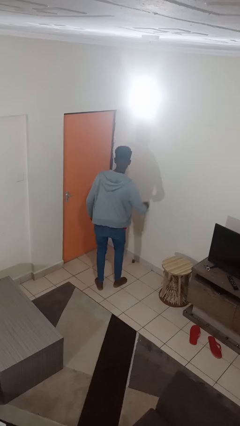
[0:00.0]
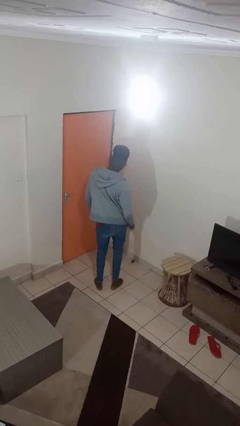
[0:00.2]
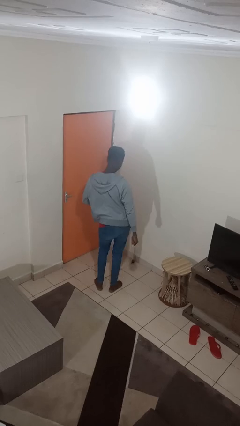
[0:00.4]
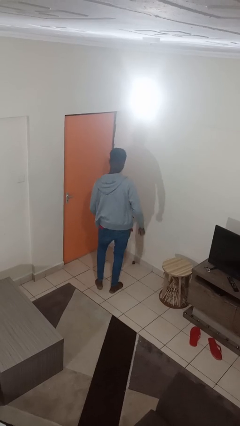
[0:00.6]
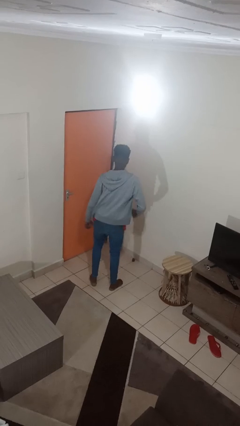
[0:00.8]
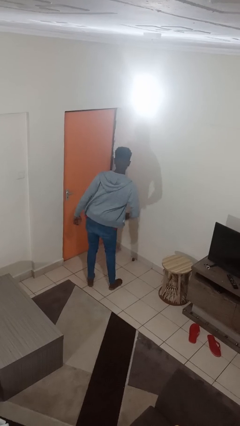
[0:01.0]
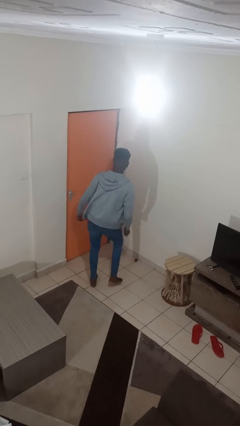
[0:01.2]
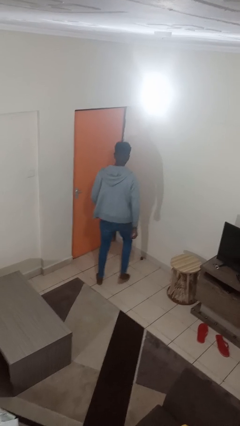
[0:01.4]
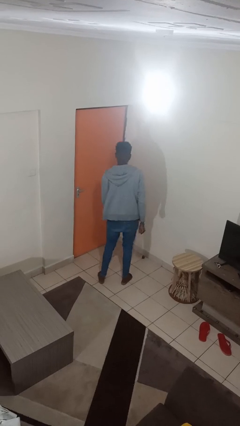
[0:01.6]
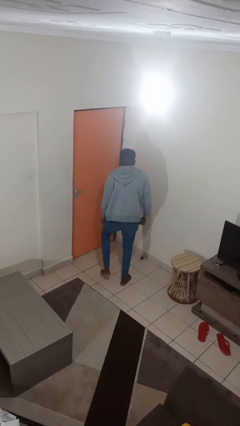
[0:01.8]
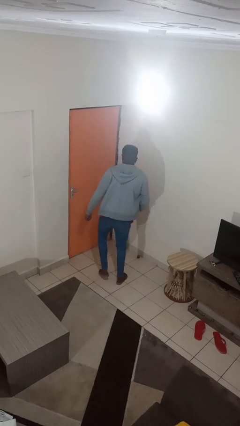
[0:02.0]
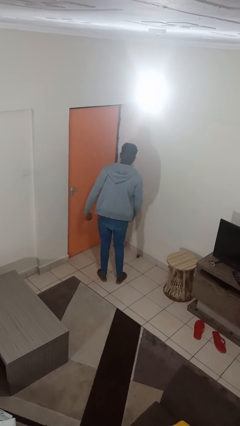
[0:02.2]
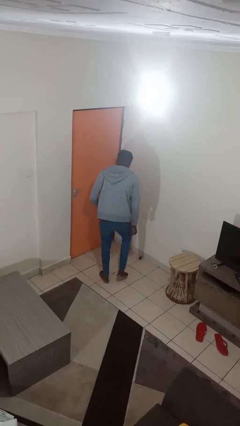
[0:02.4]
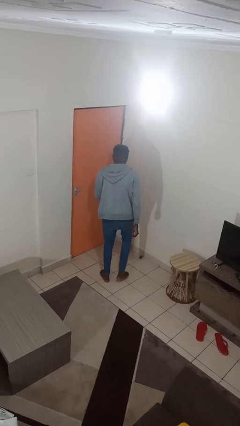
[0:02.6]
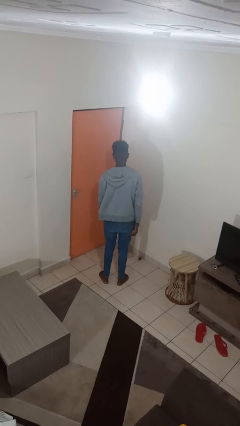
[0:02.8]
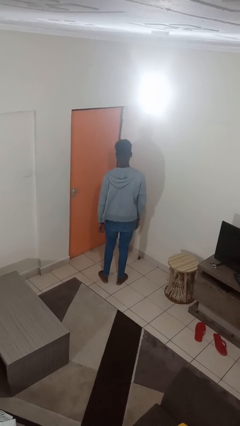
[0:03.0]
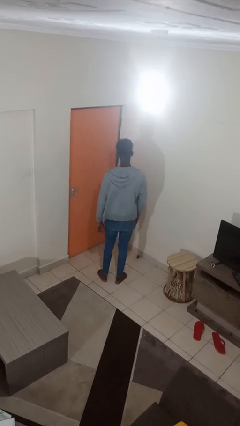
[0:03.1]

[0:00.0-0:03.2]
person dances in place

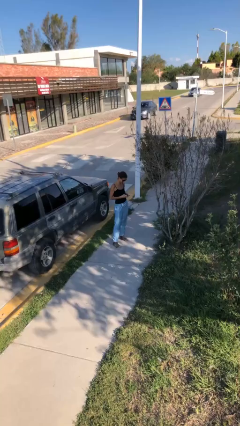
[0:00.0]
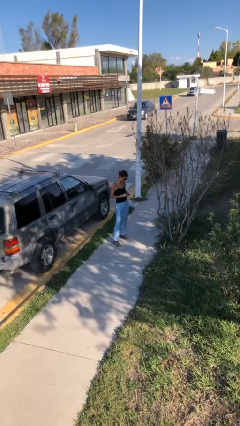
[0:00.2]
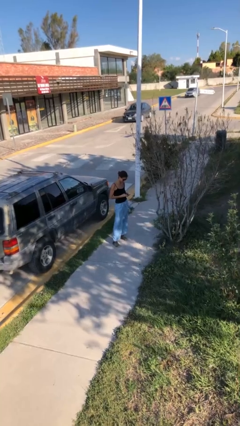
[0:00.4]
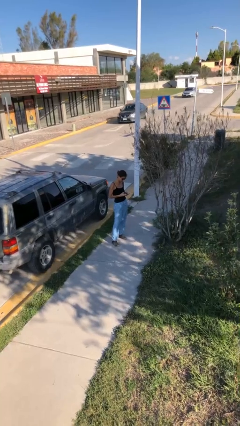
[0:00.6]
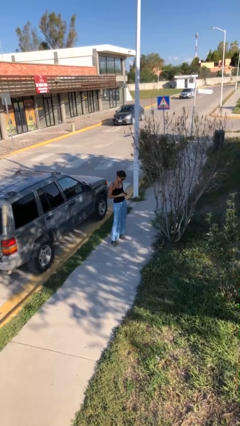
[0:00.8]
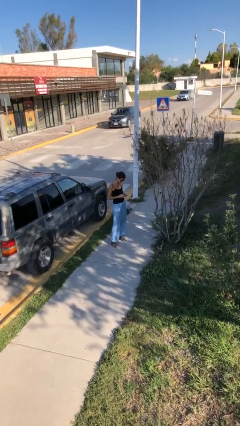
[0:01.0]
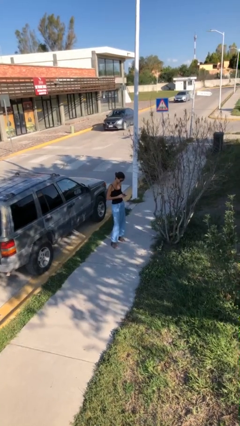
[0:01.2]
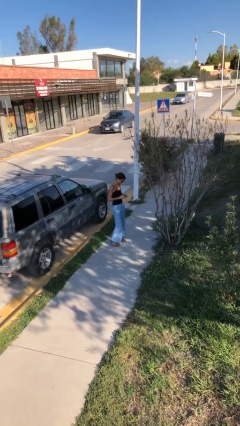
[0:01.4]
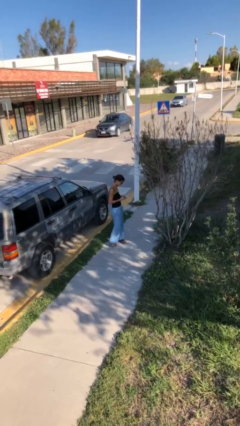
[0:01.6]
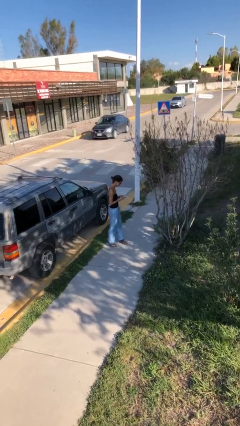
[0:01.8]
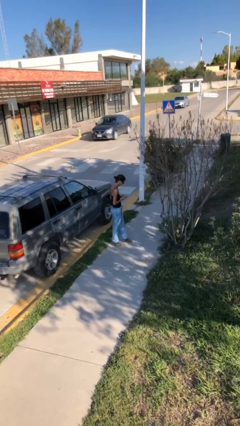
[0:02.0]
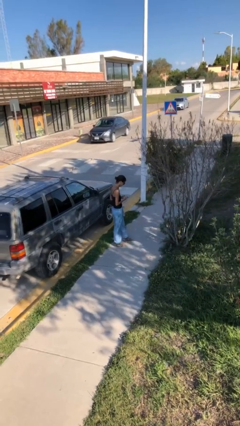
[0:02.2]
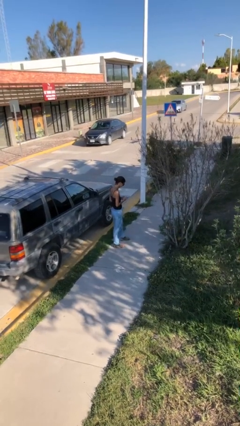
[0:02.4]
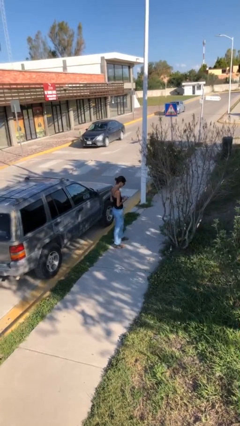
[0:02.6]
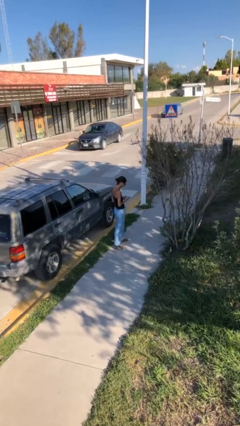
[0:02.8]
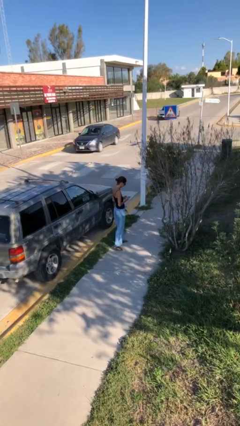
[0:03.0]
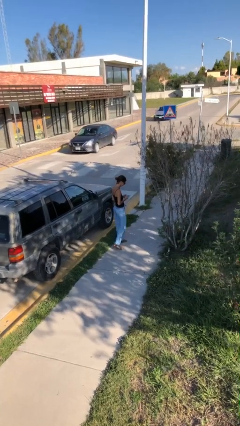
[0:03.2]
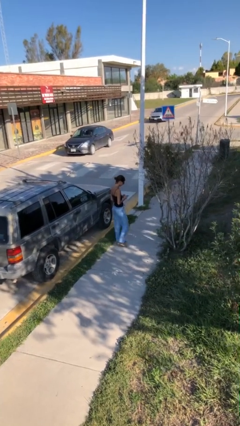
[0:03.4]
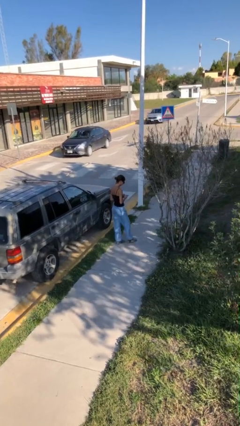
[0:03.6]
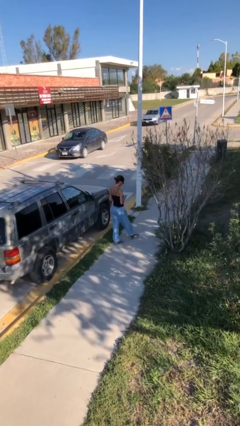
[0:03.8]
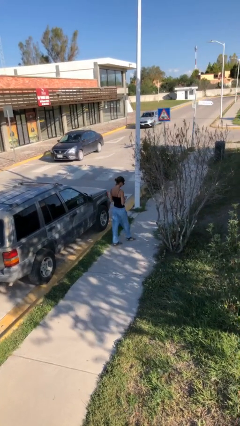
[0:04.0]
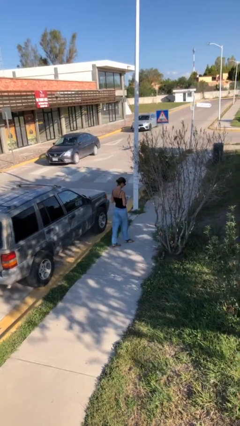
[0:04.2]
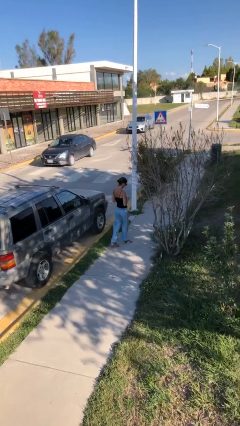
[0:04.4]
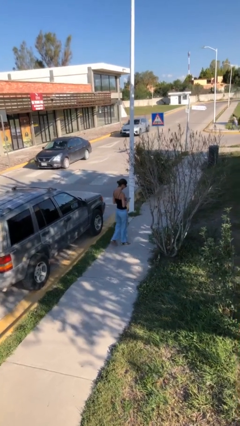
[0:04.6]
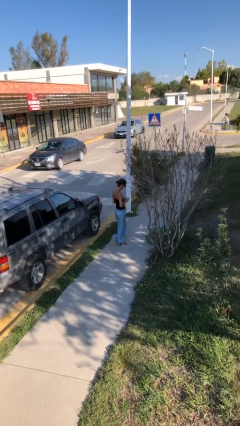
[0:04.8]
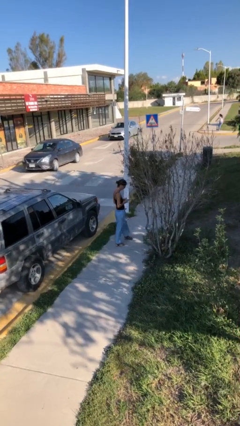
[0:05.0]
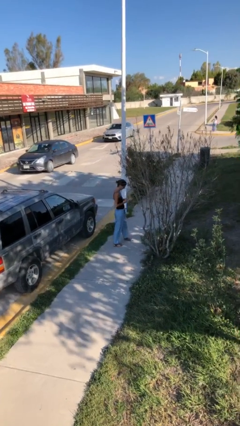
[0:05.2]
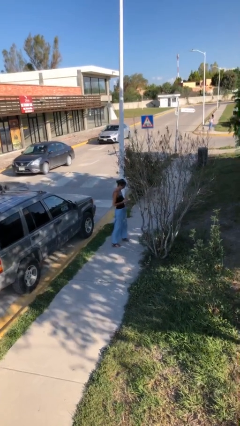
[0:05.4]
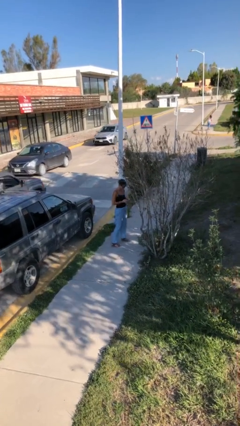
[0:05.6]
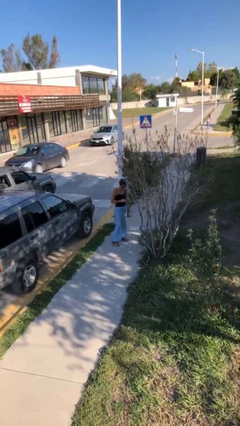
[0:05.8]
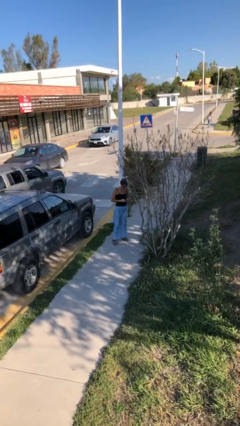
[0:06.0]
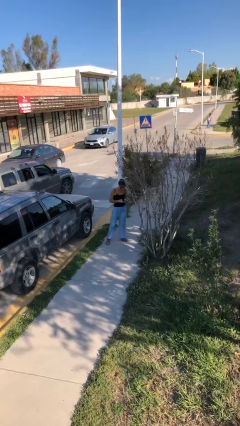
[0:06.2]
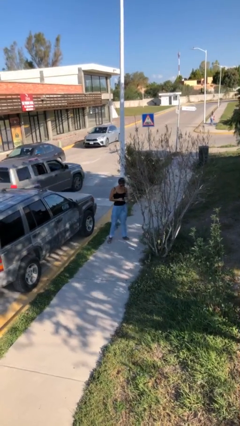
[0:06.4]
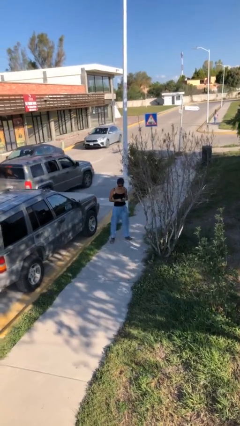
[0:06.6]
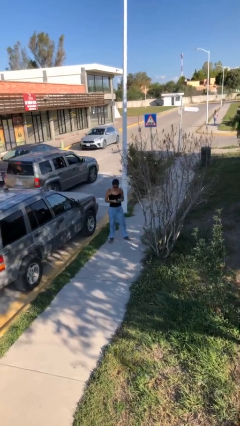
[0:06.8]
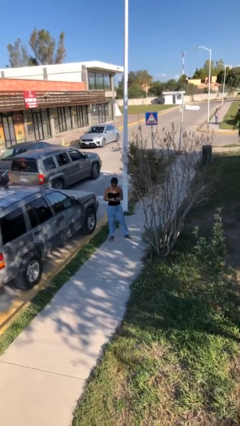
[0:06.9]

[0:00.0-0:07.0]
person texts on phone

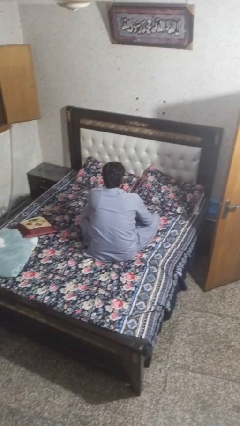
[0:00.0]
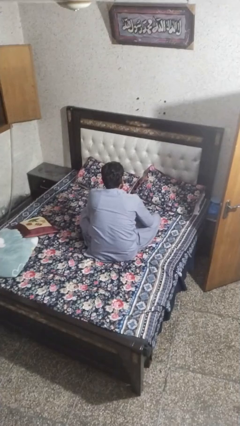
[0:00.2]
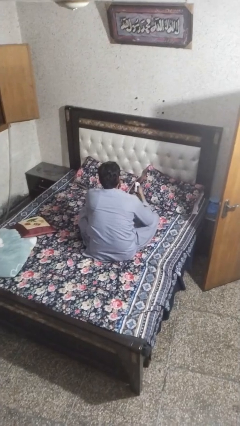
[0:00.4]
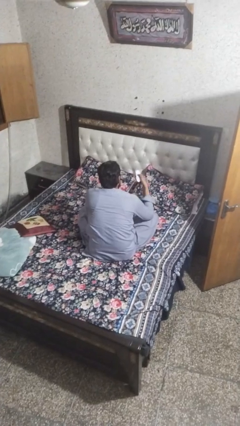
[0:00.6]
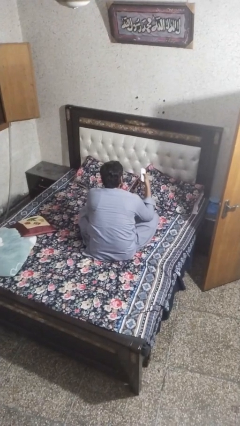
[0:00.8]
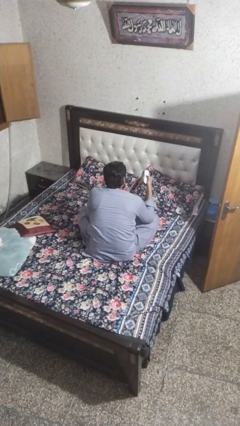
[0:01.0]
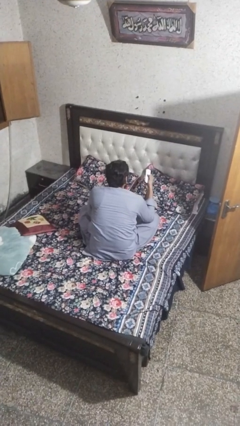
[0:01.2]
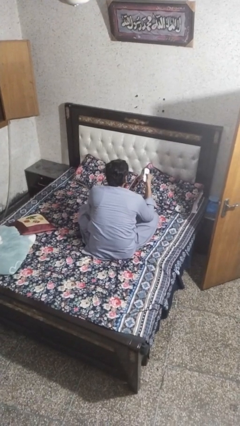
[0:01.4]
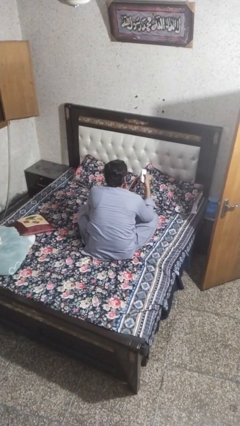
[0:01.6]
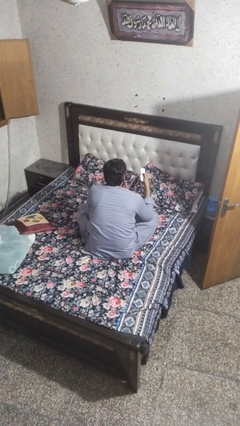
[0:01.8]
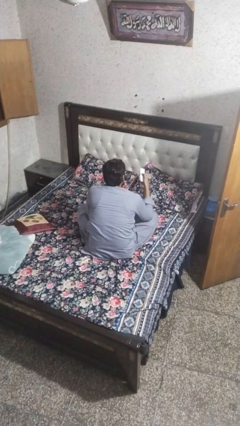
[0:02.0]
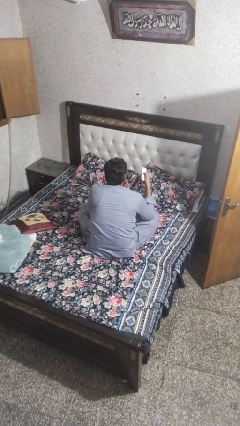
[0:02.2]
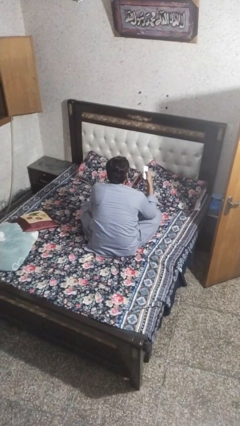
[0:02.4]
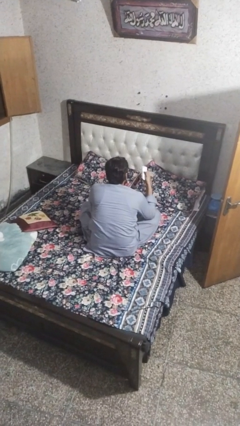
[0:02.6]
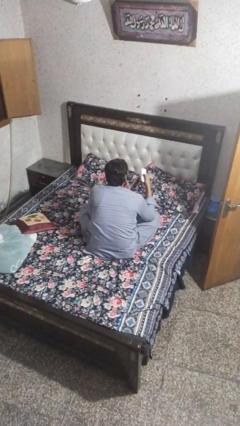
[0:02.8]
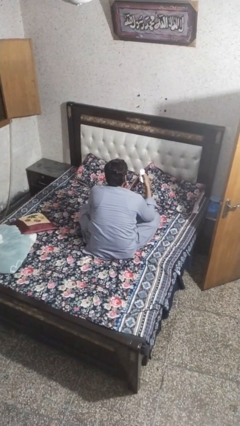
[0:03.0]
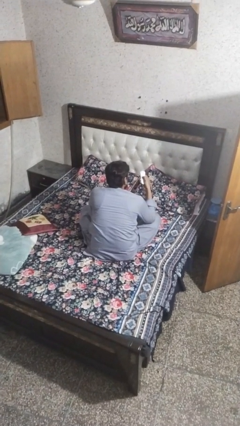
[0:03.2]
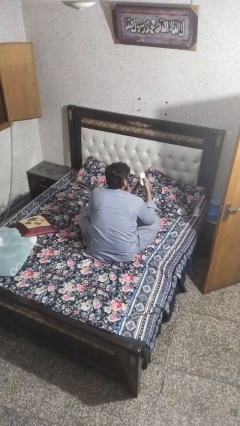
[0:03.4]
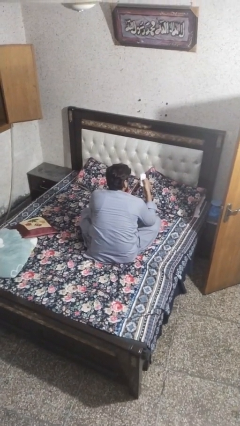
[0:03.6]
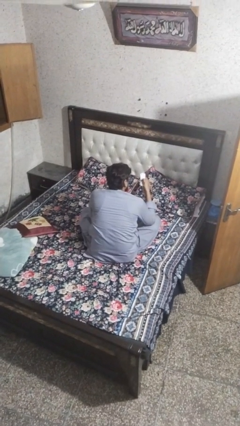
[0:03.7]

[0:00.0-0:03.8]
person uses television remote

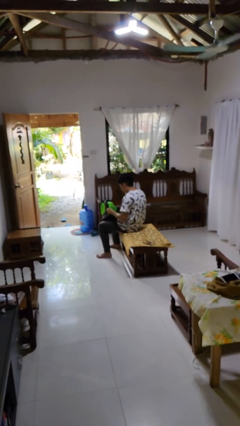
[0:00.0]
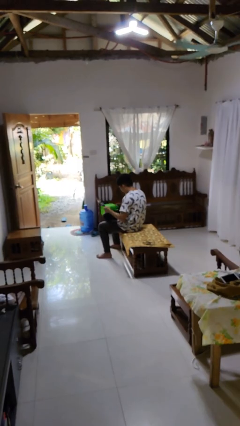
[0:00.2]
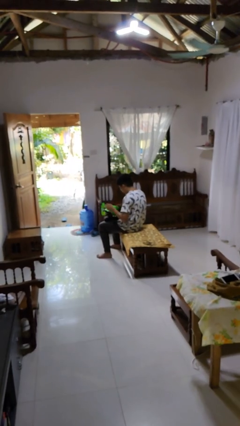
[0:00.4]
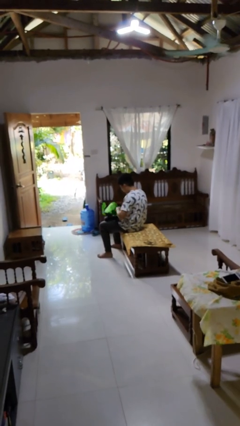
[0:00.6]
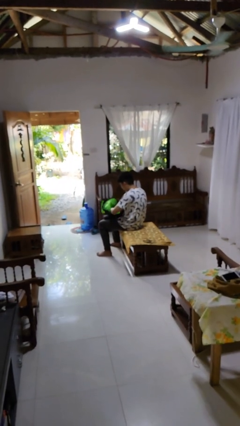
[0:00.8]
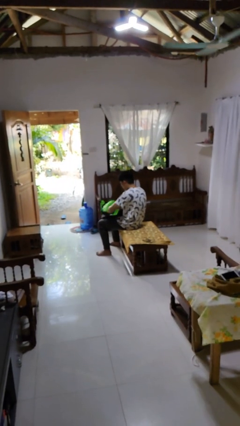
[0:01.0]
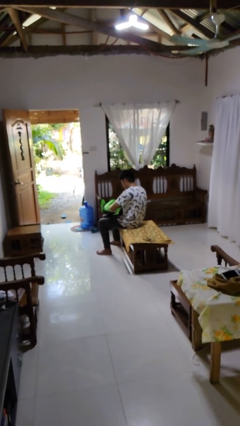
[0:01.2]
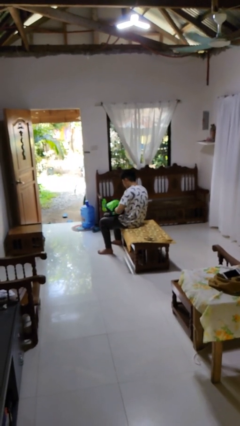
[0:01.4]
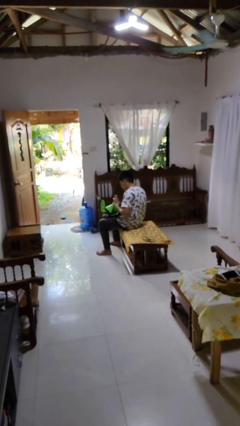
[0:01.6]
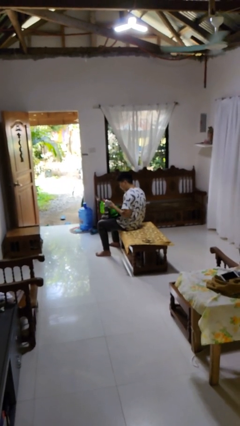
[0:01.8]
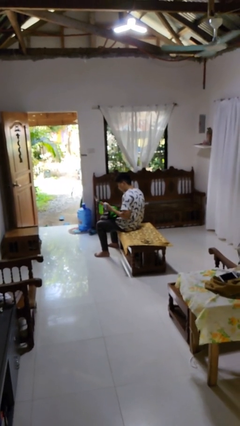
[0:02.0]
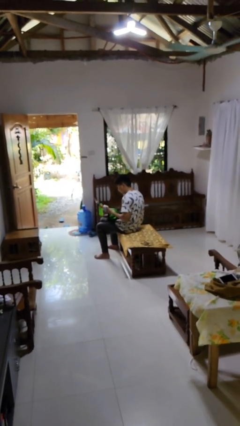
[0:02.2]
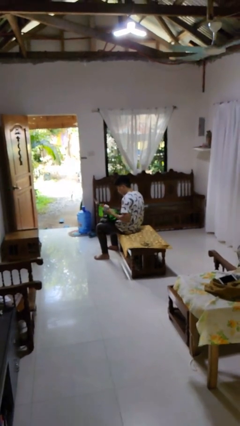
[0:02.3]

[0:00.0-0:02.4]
person takes object from backpack

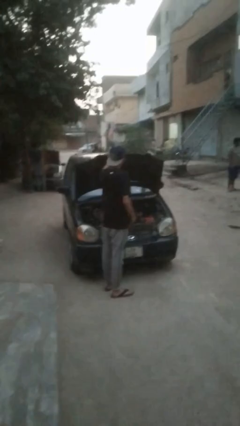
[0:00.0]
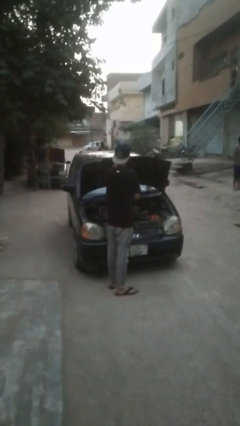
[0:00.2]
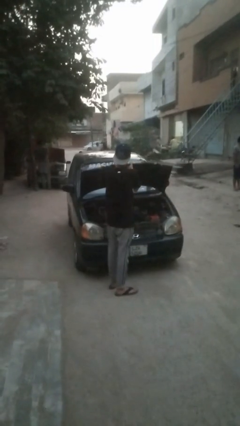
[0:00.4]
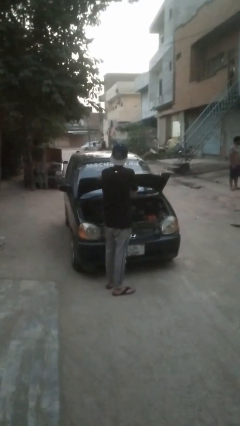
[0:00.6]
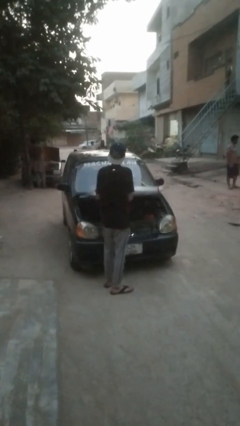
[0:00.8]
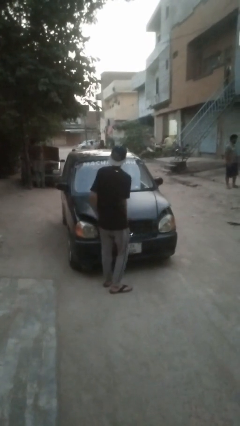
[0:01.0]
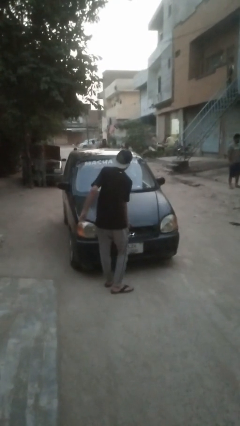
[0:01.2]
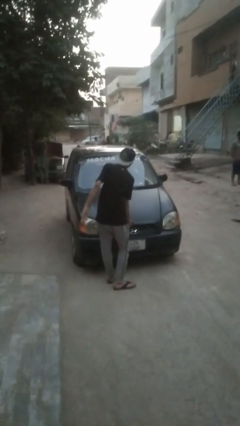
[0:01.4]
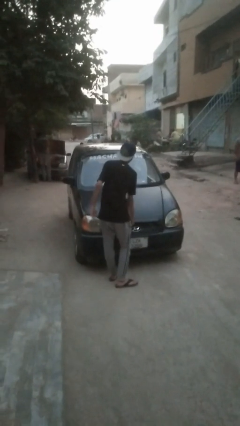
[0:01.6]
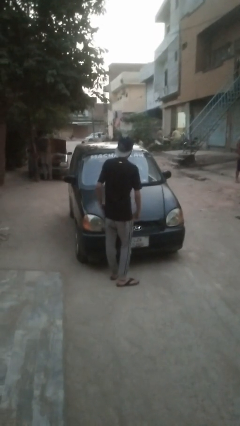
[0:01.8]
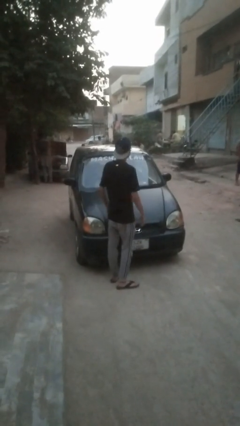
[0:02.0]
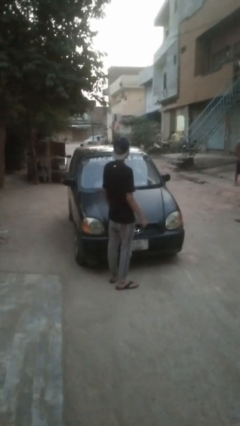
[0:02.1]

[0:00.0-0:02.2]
person closes car hood
